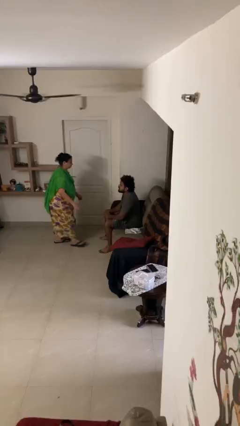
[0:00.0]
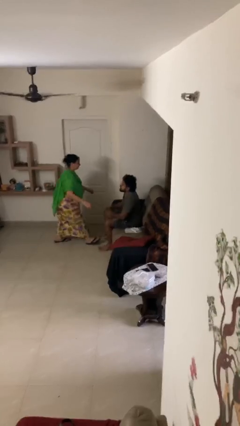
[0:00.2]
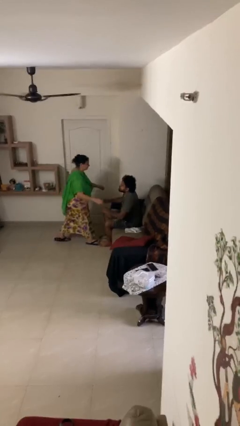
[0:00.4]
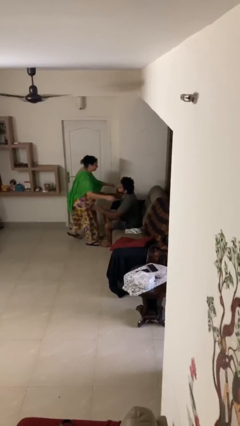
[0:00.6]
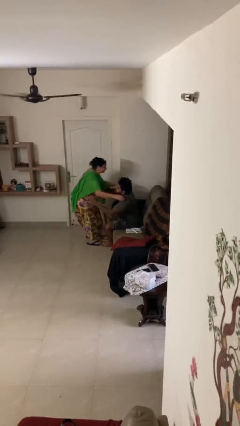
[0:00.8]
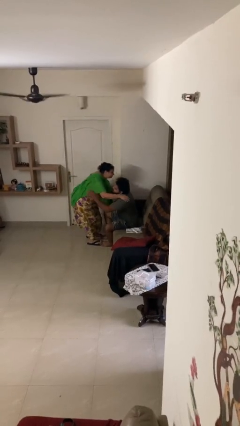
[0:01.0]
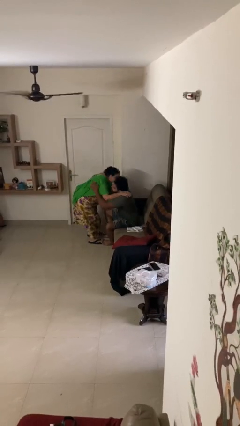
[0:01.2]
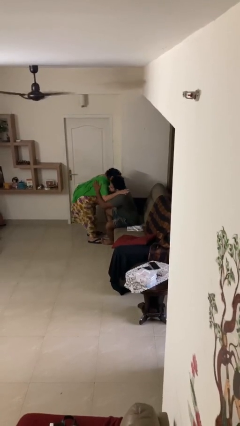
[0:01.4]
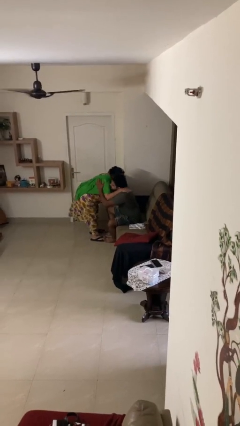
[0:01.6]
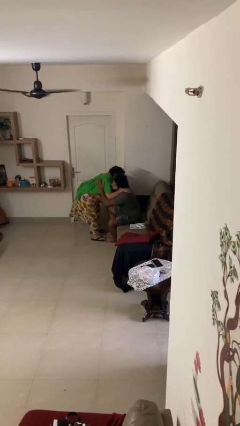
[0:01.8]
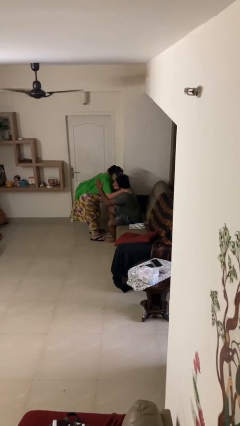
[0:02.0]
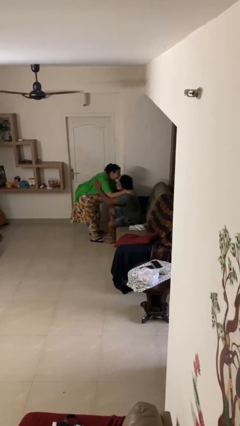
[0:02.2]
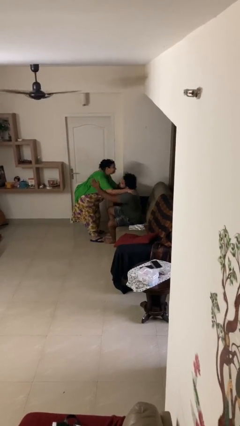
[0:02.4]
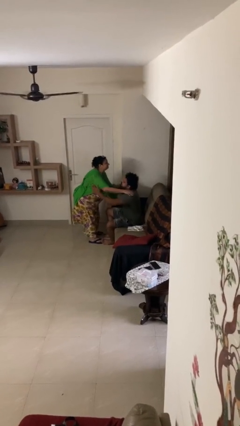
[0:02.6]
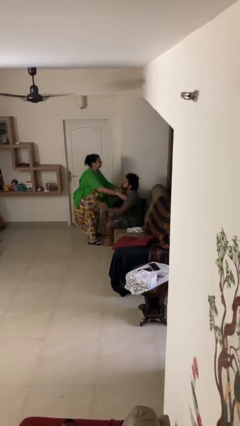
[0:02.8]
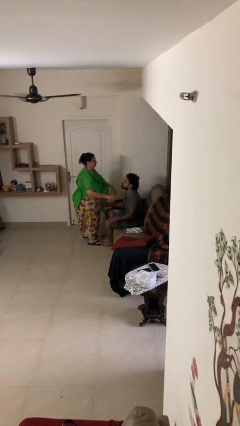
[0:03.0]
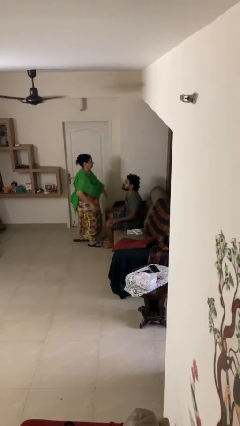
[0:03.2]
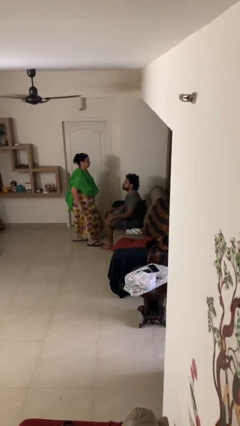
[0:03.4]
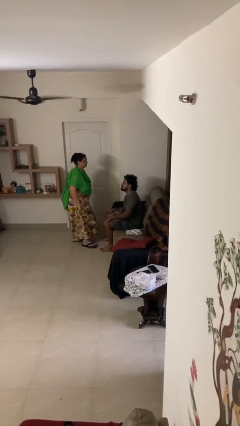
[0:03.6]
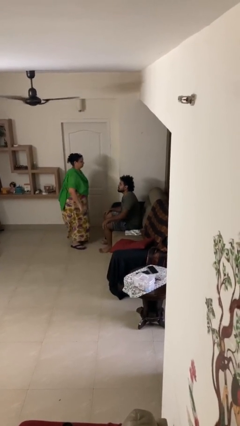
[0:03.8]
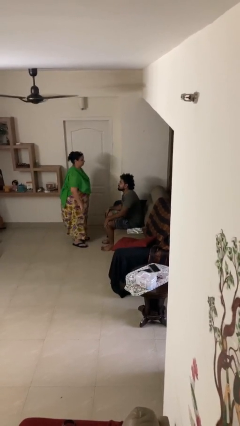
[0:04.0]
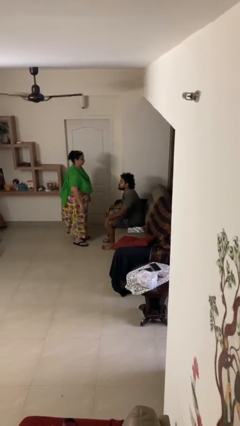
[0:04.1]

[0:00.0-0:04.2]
person embraces person

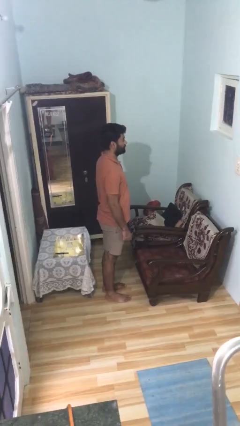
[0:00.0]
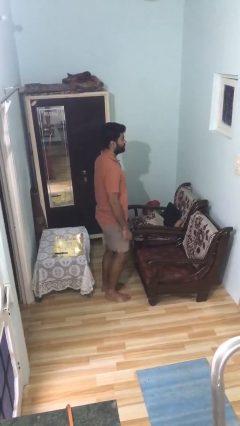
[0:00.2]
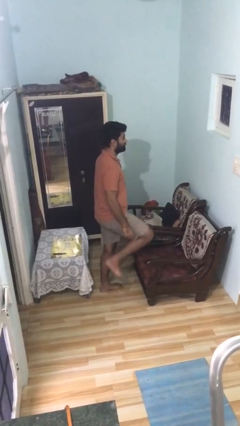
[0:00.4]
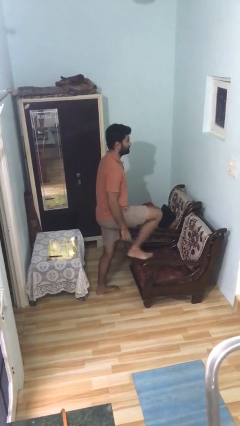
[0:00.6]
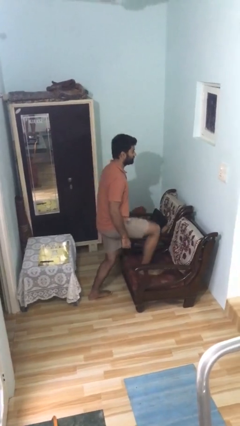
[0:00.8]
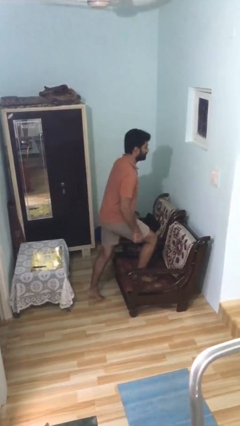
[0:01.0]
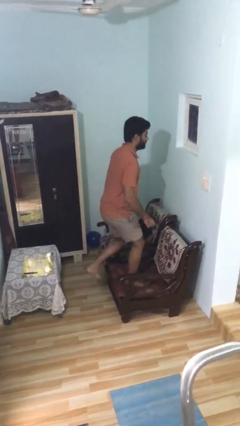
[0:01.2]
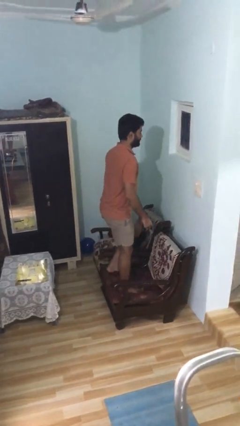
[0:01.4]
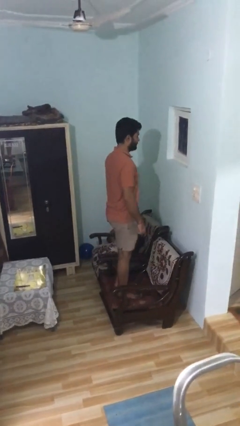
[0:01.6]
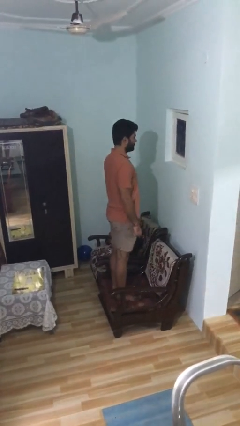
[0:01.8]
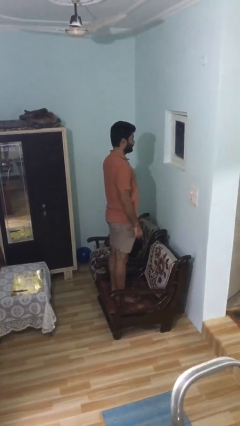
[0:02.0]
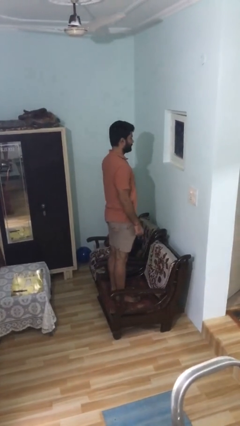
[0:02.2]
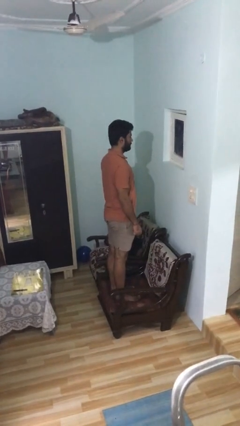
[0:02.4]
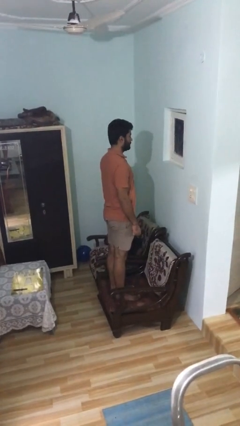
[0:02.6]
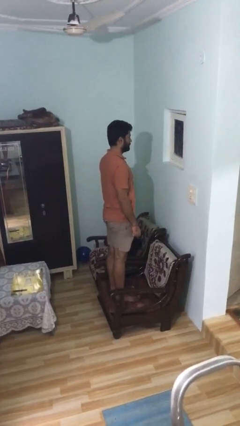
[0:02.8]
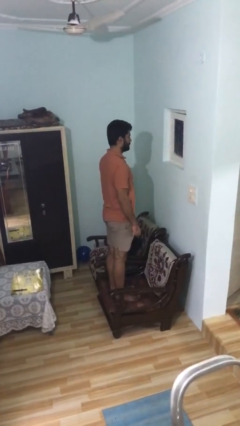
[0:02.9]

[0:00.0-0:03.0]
person climbs on couch

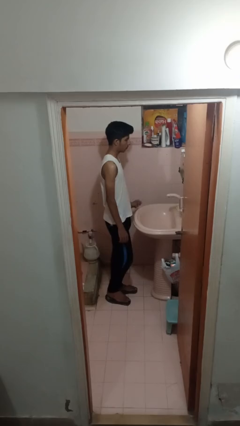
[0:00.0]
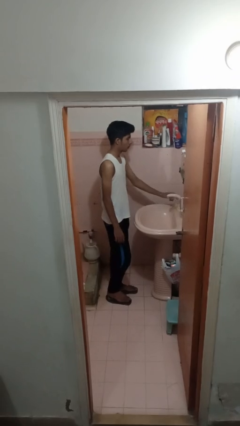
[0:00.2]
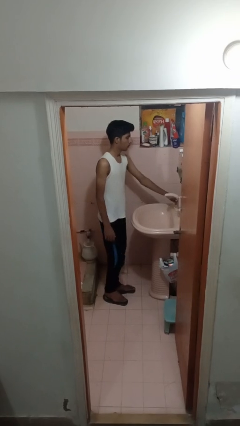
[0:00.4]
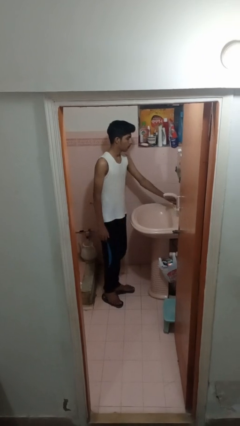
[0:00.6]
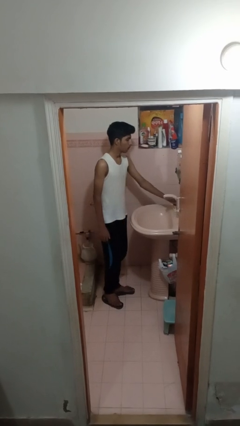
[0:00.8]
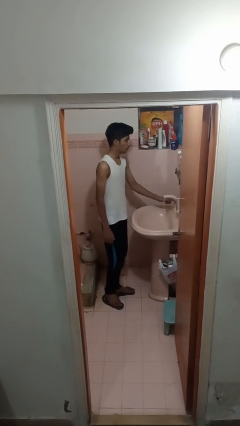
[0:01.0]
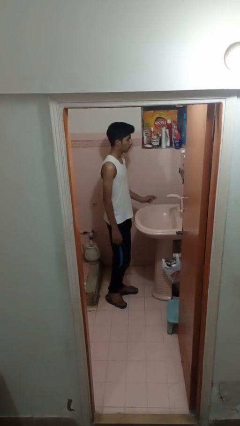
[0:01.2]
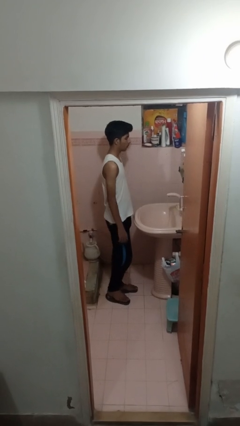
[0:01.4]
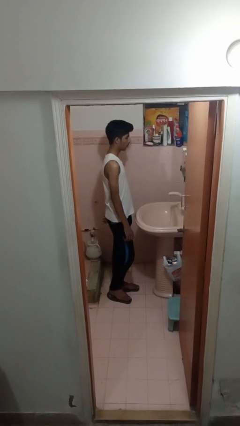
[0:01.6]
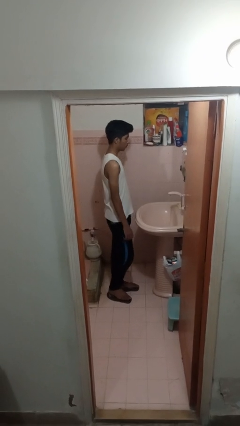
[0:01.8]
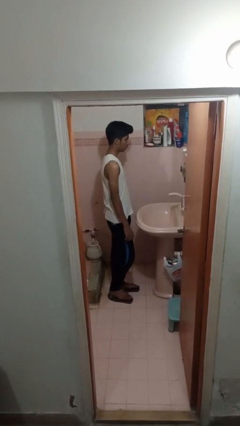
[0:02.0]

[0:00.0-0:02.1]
person turns on faucet

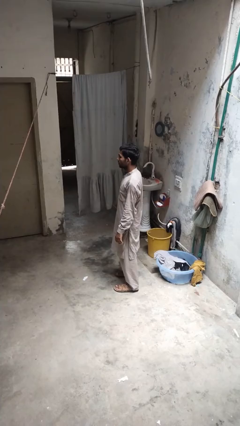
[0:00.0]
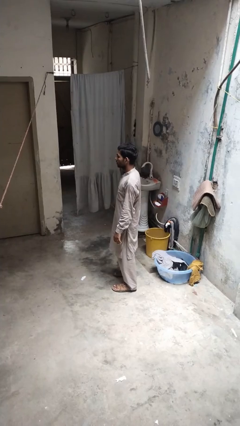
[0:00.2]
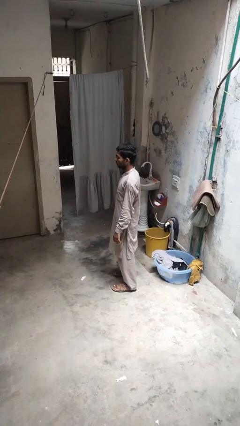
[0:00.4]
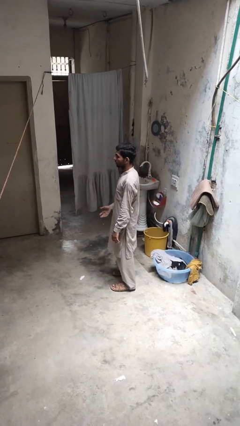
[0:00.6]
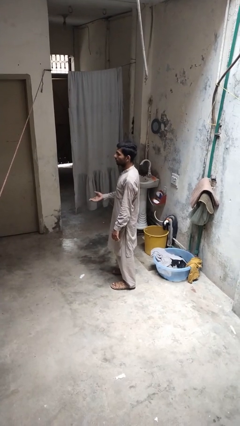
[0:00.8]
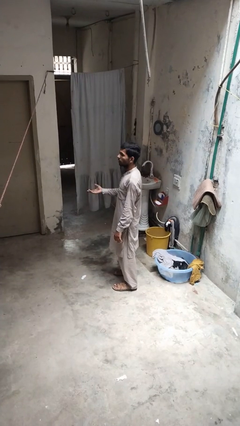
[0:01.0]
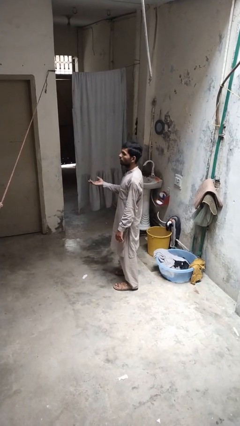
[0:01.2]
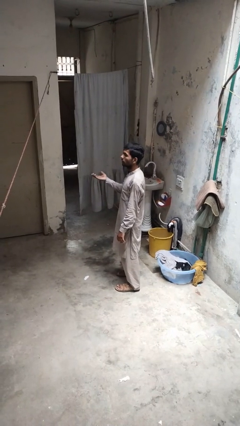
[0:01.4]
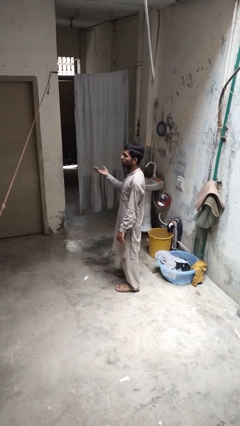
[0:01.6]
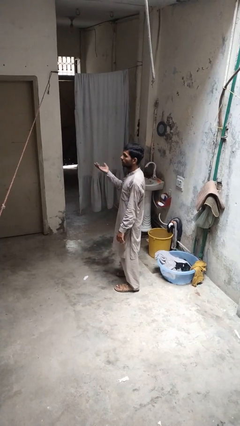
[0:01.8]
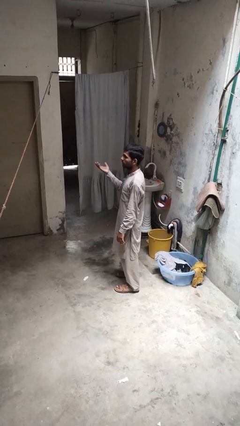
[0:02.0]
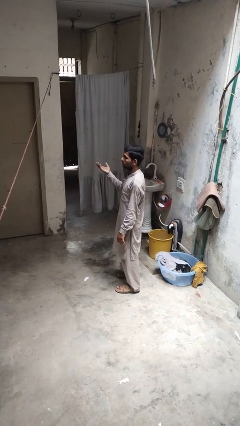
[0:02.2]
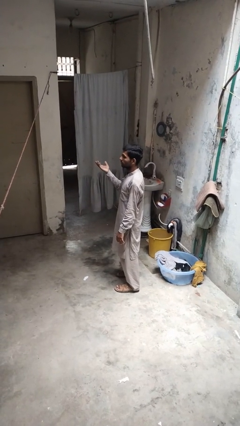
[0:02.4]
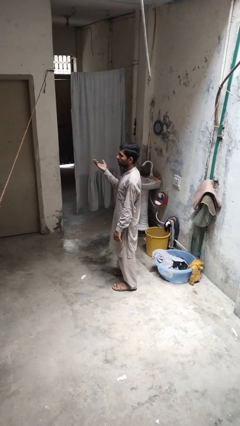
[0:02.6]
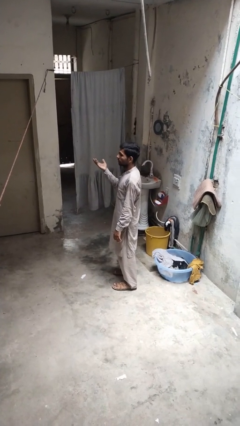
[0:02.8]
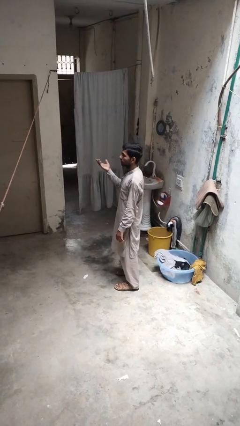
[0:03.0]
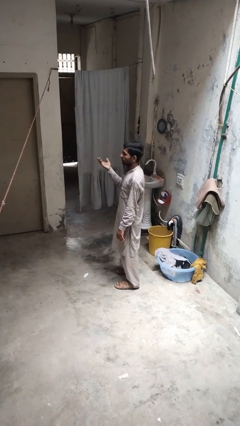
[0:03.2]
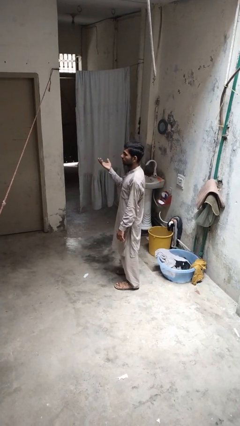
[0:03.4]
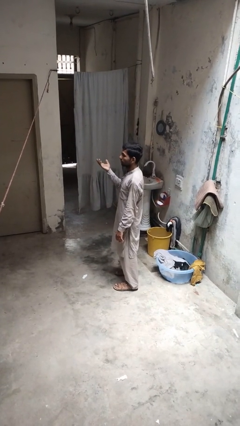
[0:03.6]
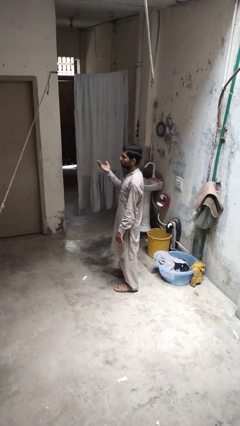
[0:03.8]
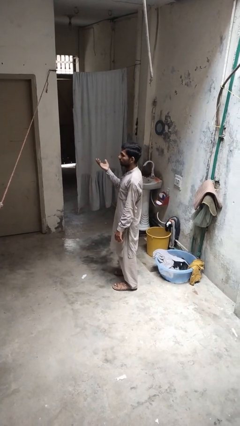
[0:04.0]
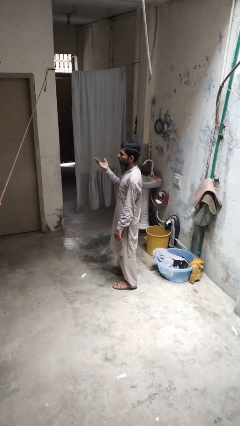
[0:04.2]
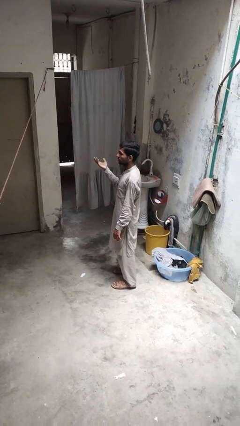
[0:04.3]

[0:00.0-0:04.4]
person gestures swipe up

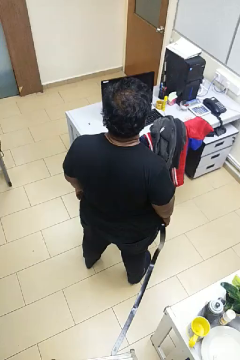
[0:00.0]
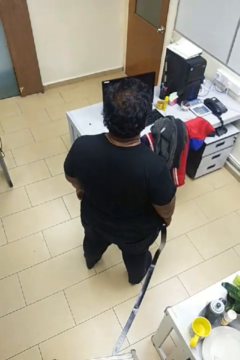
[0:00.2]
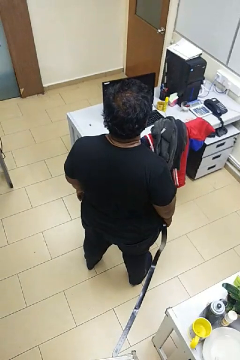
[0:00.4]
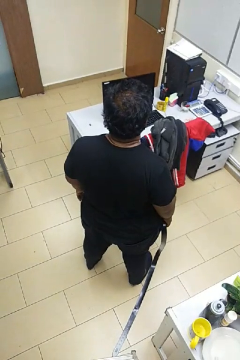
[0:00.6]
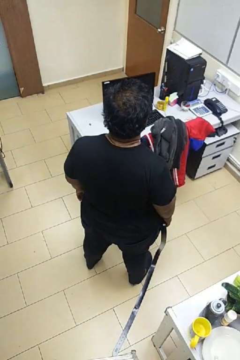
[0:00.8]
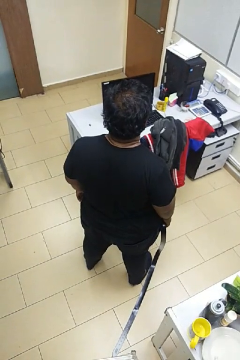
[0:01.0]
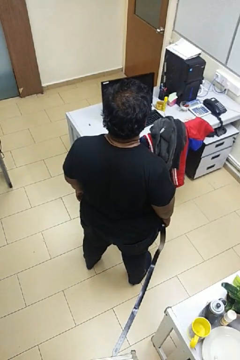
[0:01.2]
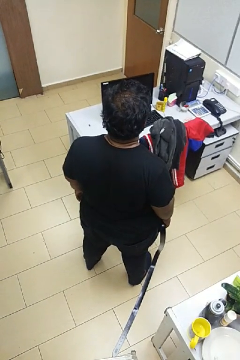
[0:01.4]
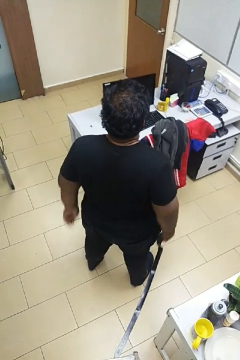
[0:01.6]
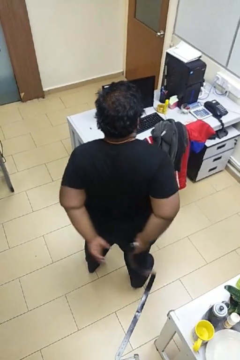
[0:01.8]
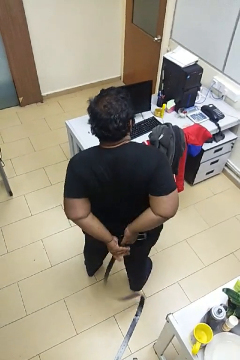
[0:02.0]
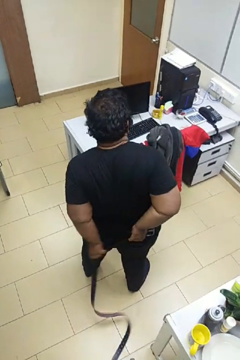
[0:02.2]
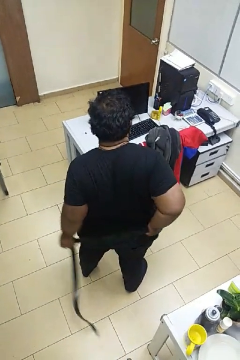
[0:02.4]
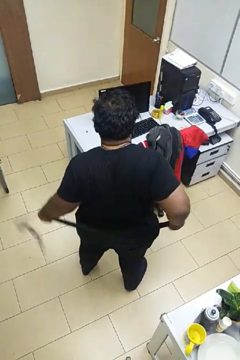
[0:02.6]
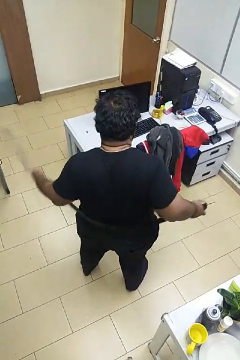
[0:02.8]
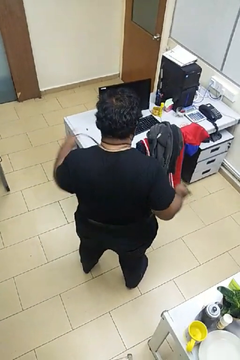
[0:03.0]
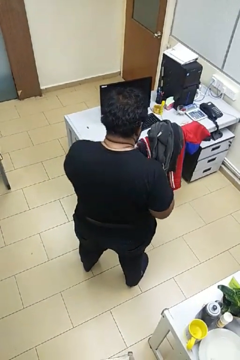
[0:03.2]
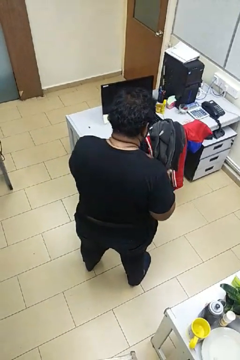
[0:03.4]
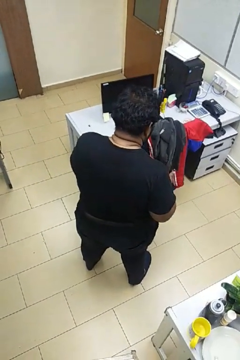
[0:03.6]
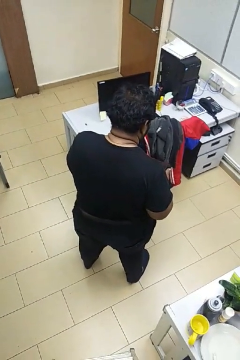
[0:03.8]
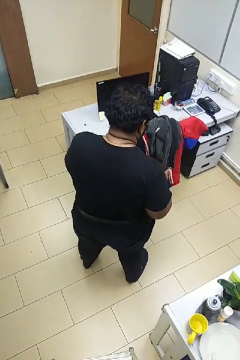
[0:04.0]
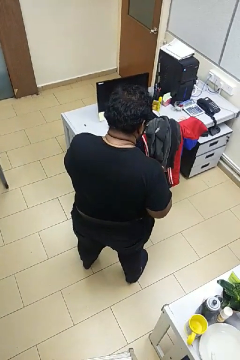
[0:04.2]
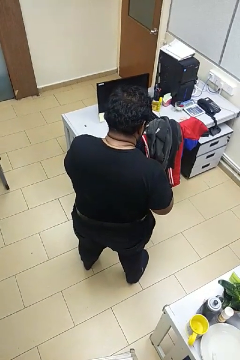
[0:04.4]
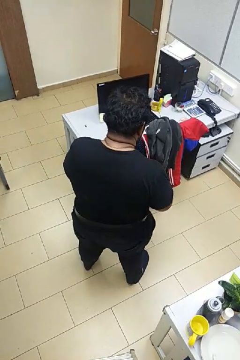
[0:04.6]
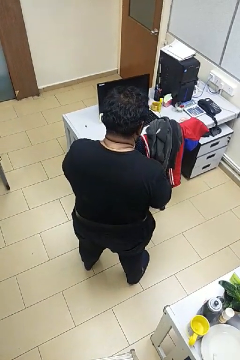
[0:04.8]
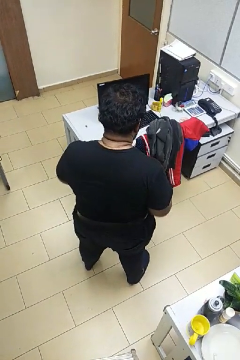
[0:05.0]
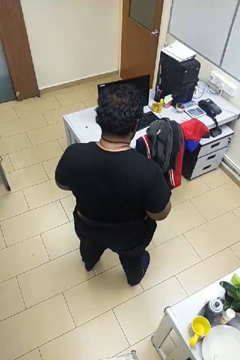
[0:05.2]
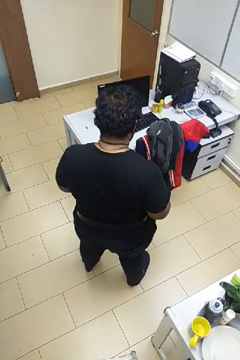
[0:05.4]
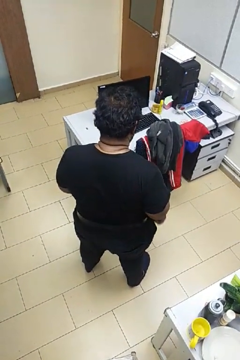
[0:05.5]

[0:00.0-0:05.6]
person puts on belt
